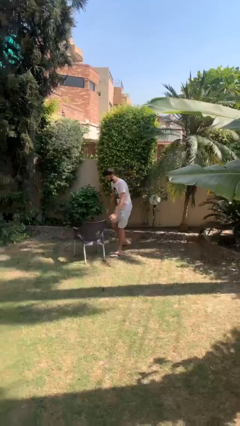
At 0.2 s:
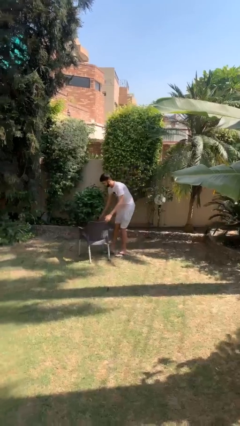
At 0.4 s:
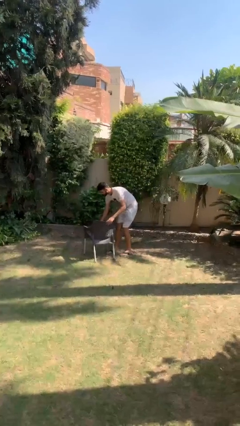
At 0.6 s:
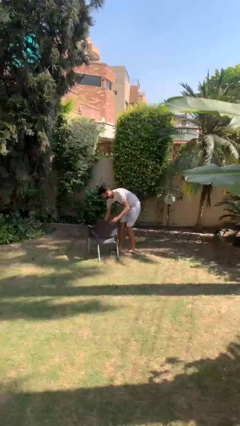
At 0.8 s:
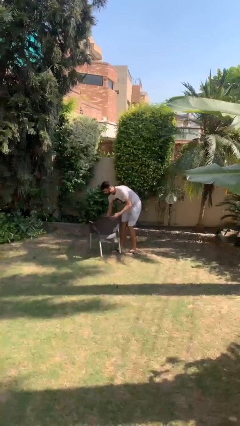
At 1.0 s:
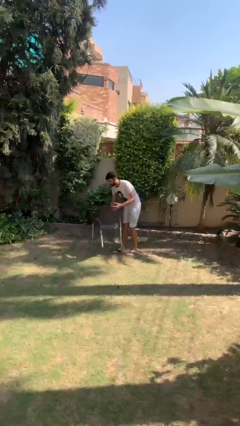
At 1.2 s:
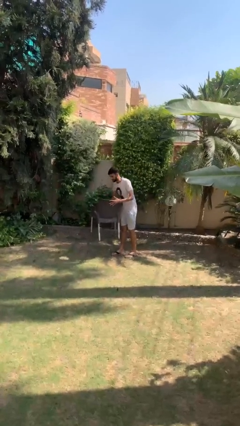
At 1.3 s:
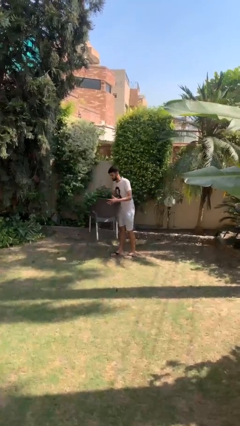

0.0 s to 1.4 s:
person picks up object from floor

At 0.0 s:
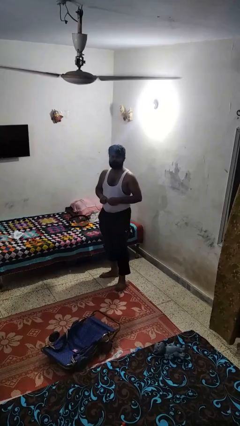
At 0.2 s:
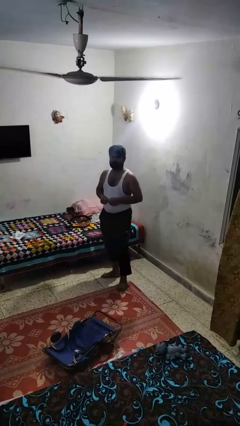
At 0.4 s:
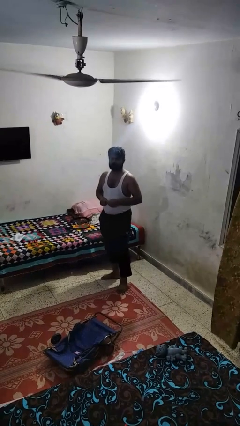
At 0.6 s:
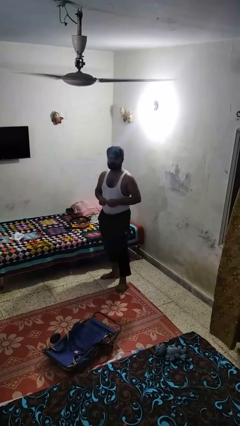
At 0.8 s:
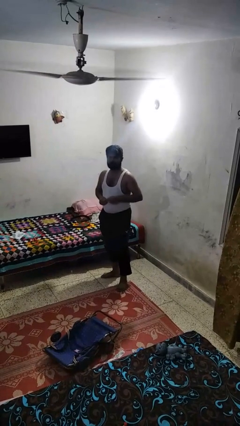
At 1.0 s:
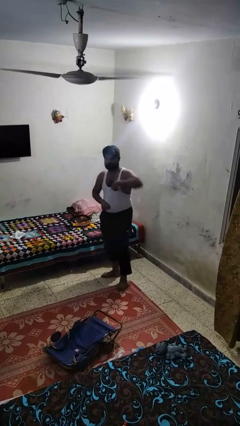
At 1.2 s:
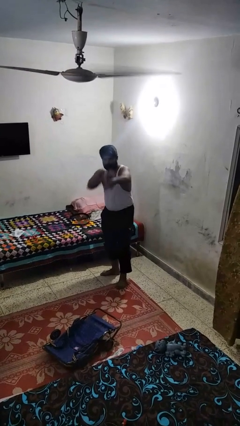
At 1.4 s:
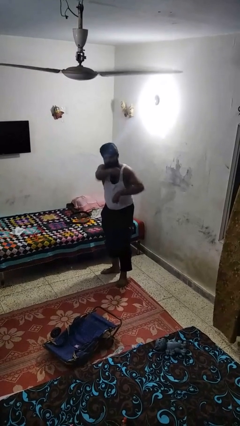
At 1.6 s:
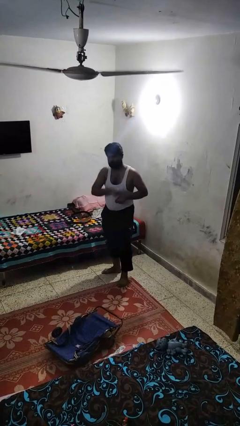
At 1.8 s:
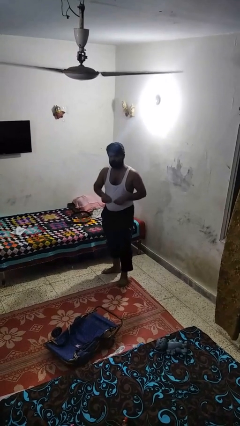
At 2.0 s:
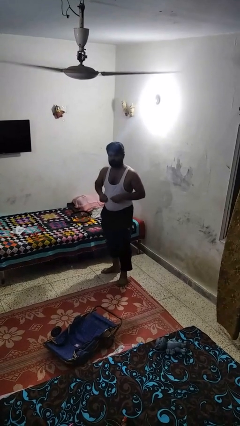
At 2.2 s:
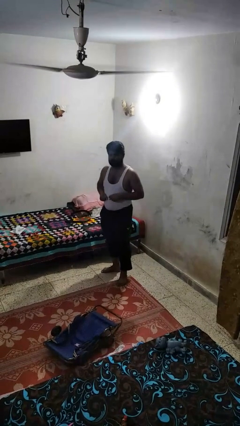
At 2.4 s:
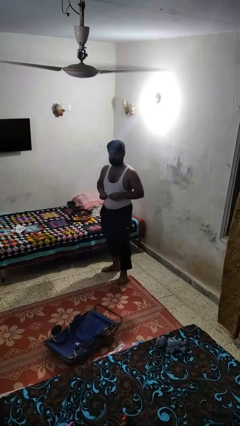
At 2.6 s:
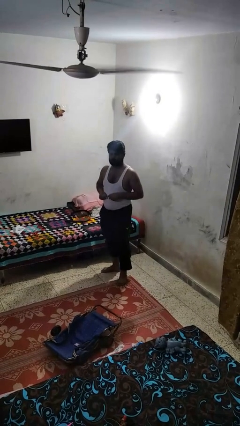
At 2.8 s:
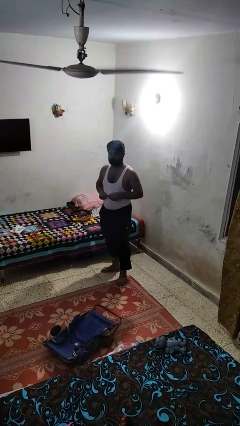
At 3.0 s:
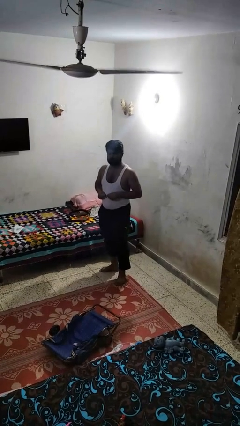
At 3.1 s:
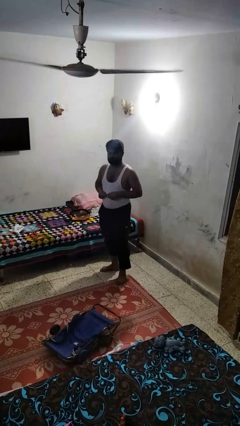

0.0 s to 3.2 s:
person karate chop

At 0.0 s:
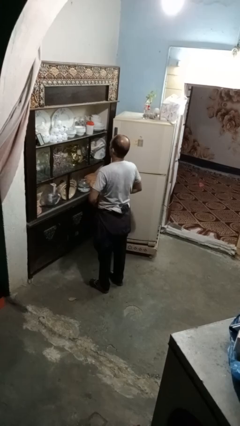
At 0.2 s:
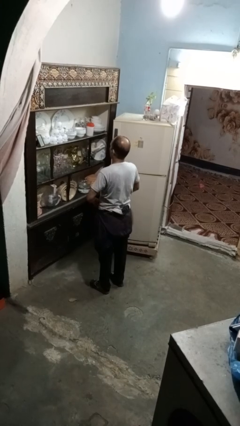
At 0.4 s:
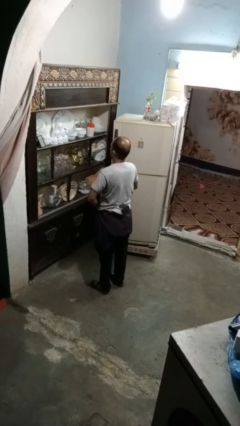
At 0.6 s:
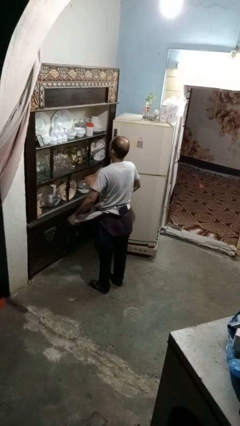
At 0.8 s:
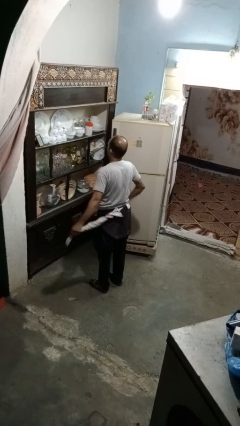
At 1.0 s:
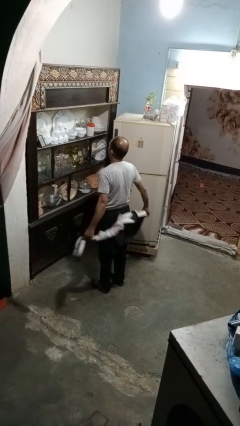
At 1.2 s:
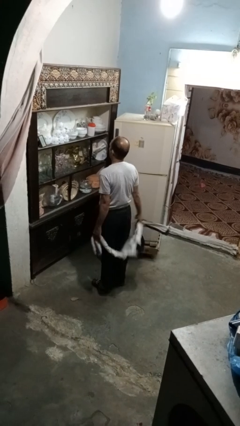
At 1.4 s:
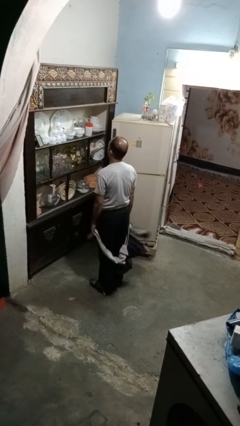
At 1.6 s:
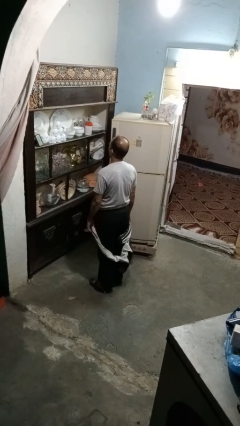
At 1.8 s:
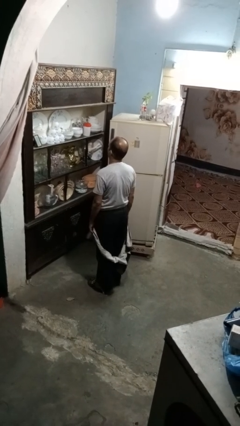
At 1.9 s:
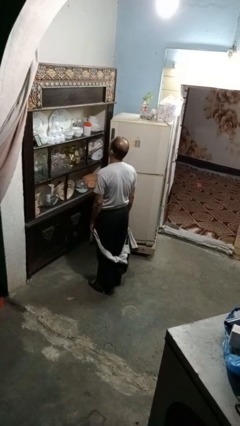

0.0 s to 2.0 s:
person unties jacket around waist

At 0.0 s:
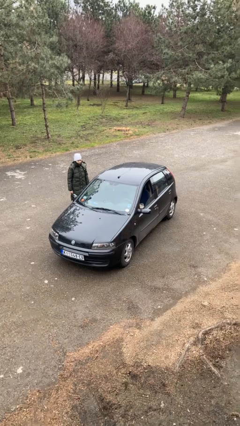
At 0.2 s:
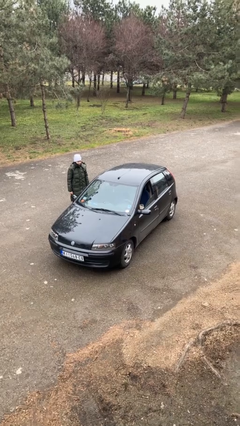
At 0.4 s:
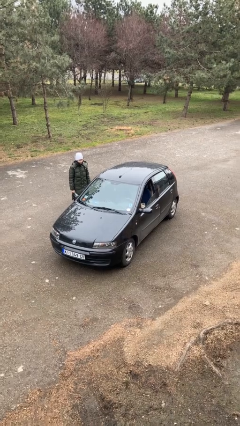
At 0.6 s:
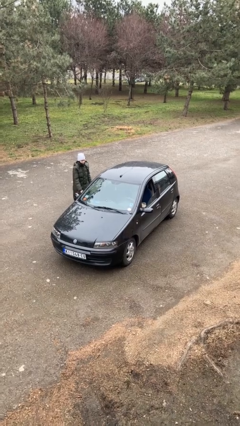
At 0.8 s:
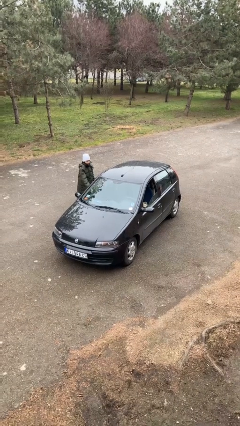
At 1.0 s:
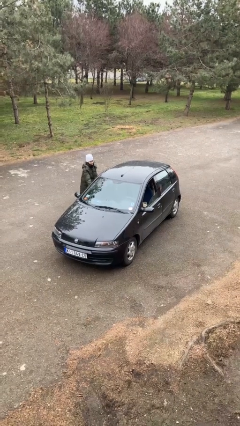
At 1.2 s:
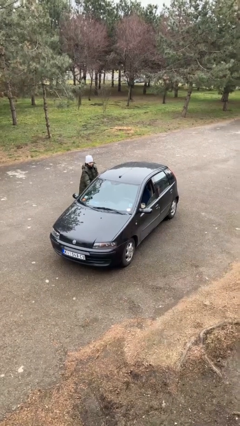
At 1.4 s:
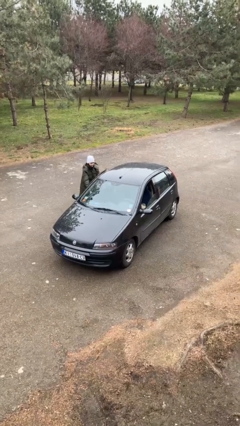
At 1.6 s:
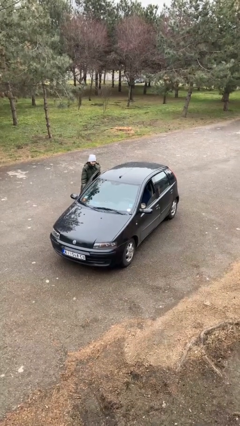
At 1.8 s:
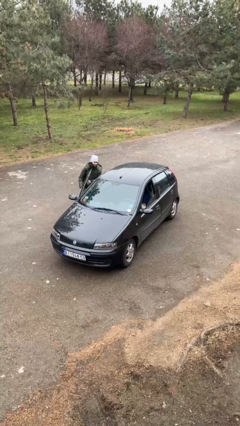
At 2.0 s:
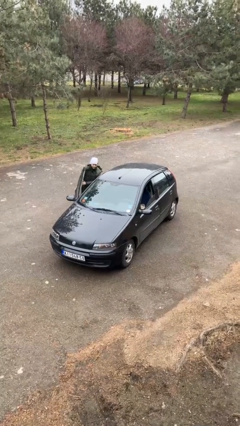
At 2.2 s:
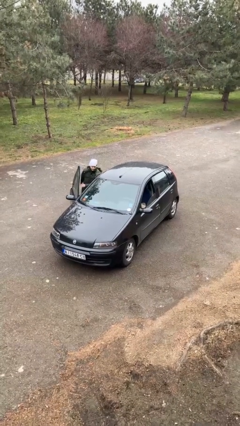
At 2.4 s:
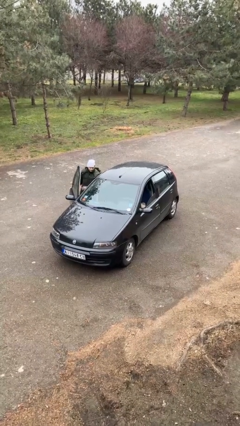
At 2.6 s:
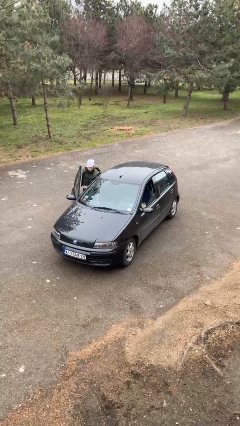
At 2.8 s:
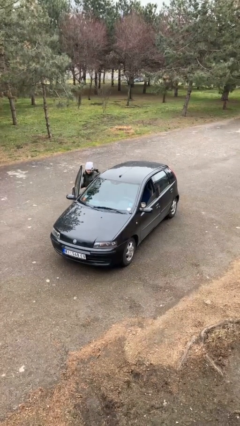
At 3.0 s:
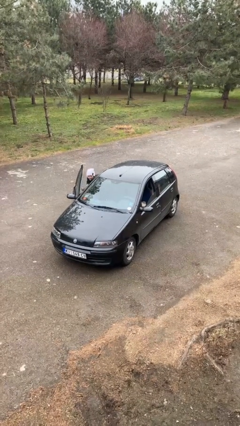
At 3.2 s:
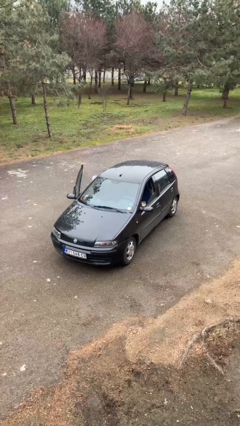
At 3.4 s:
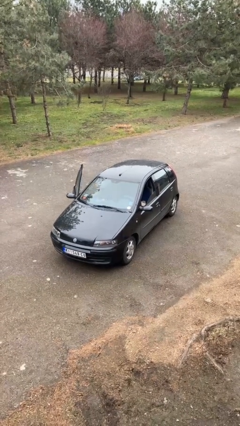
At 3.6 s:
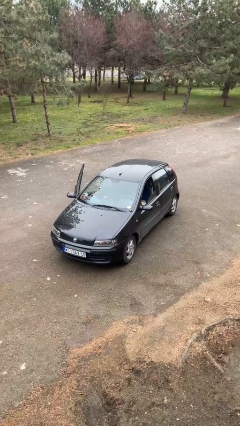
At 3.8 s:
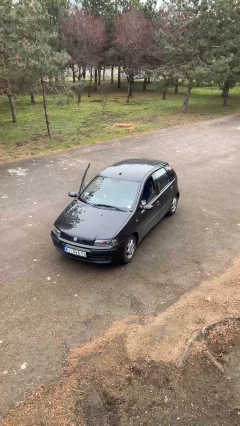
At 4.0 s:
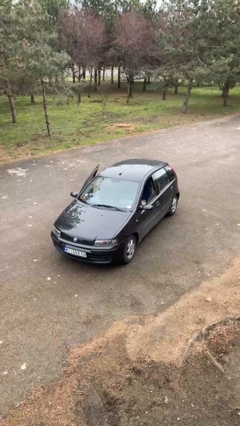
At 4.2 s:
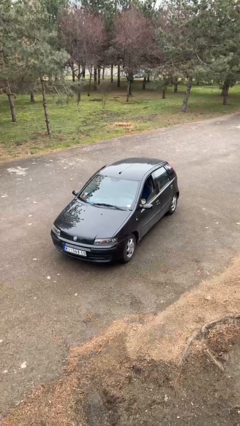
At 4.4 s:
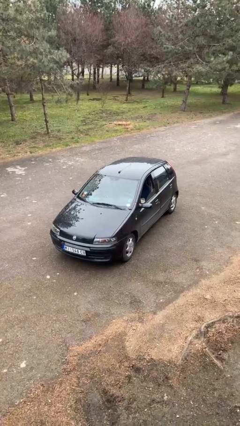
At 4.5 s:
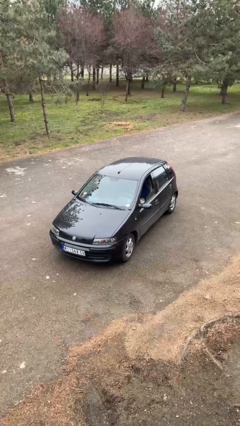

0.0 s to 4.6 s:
car picks up person

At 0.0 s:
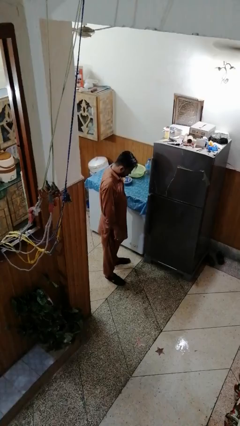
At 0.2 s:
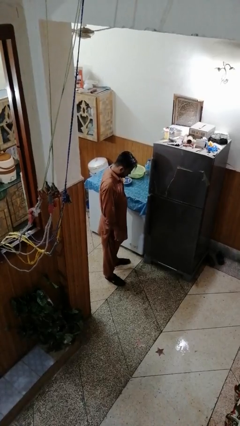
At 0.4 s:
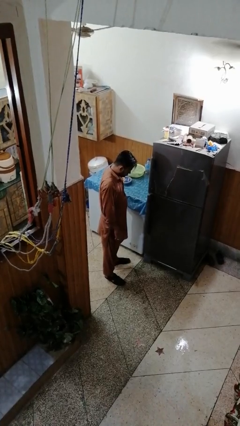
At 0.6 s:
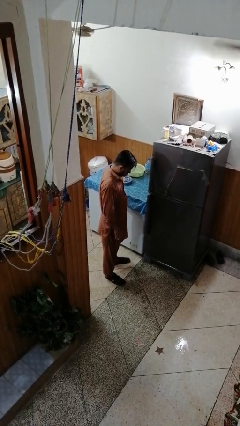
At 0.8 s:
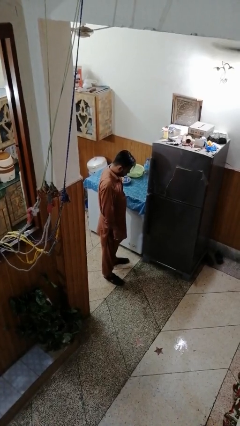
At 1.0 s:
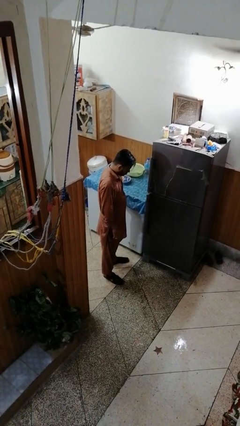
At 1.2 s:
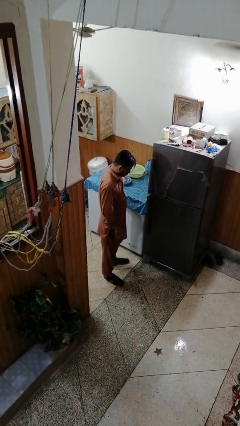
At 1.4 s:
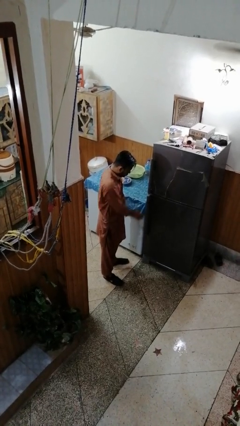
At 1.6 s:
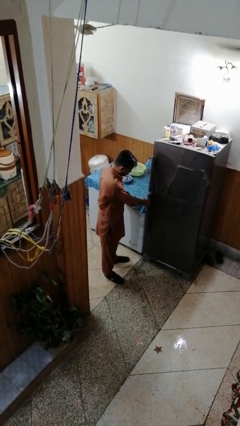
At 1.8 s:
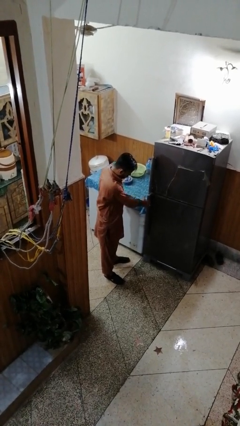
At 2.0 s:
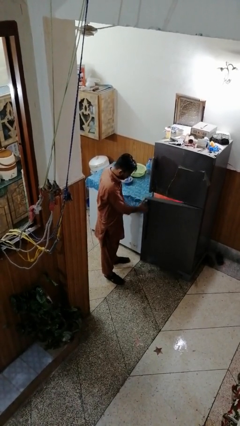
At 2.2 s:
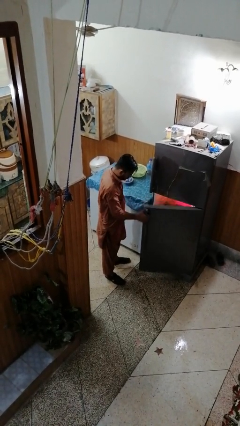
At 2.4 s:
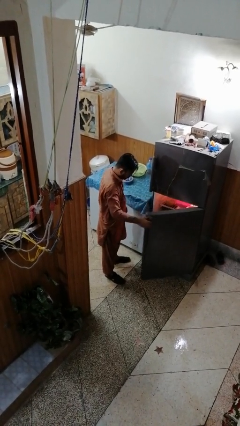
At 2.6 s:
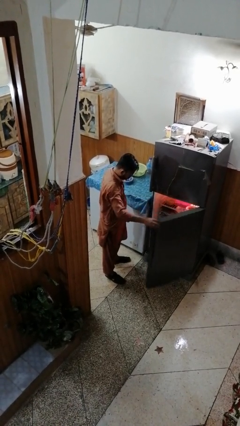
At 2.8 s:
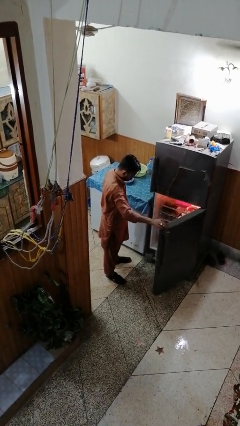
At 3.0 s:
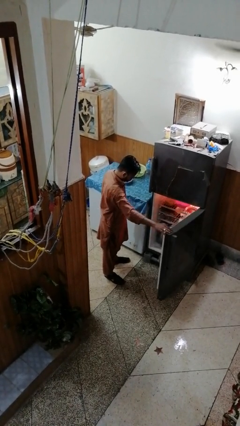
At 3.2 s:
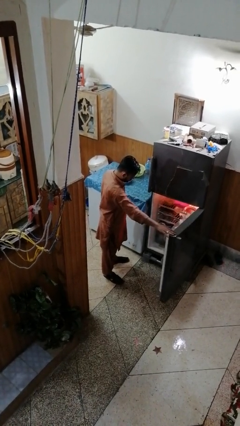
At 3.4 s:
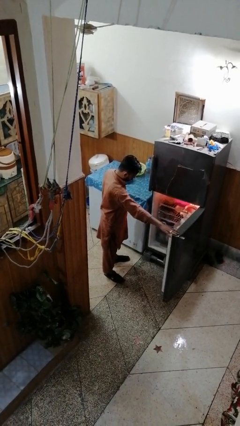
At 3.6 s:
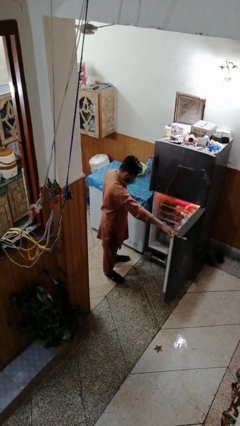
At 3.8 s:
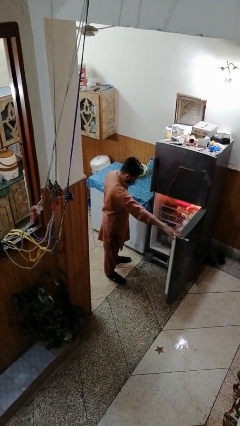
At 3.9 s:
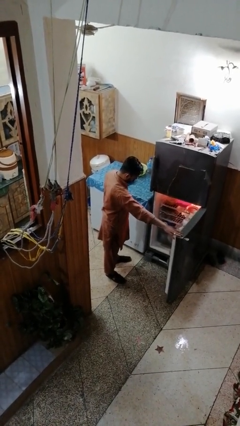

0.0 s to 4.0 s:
person opens refrigerator

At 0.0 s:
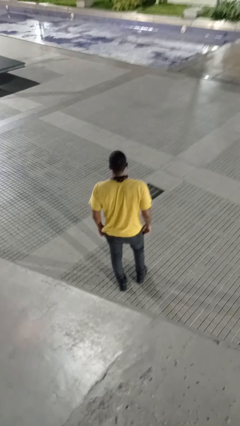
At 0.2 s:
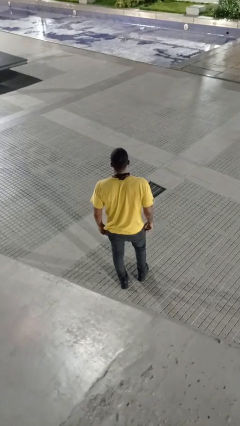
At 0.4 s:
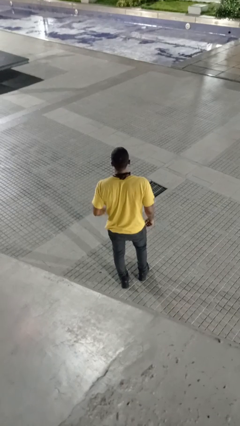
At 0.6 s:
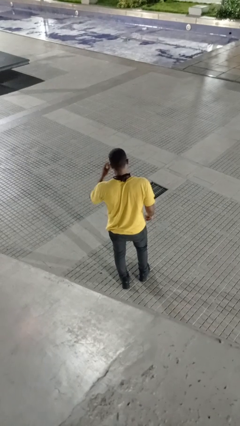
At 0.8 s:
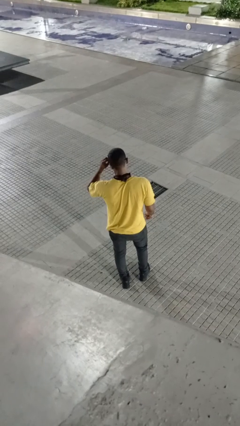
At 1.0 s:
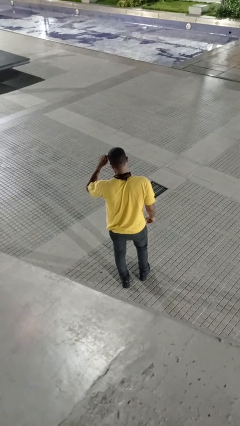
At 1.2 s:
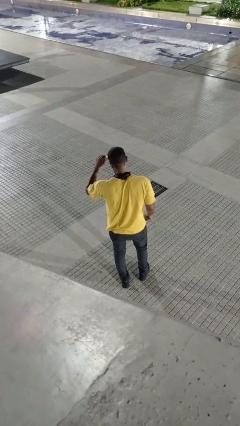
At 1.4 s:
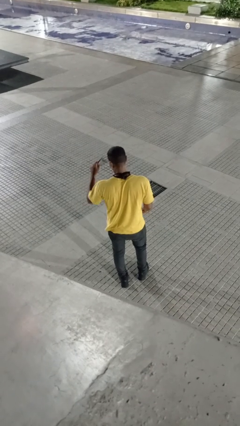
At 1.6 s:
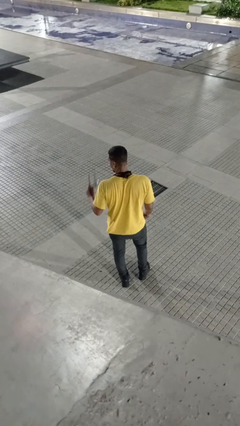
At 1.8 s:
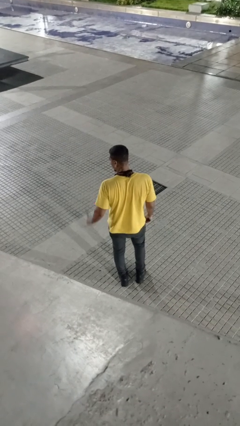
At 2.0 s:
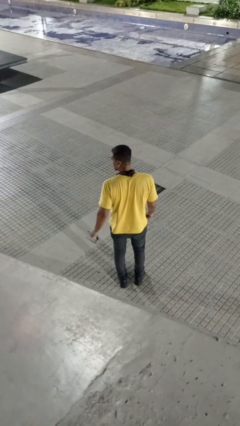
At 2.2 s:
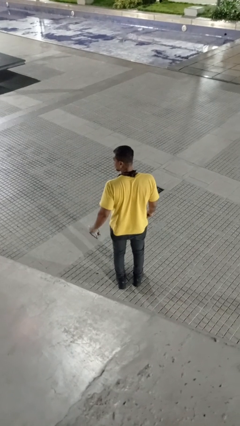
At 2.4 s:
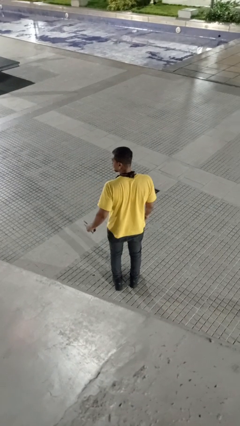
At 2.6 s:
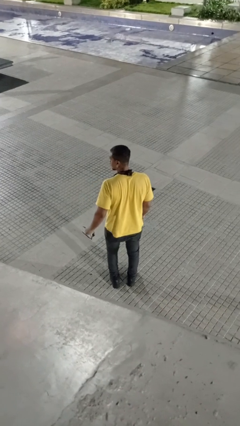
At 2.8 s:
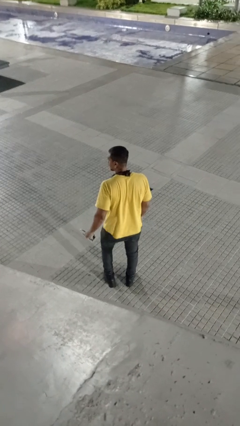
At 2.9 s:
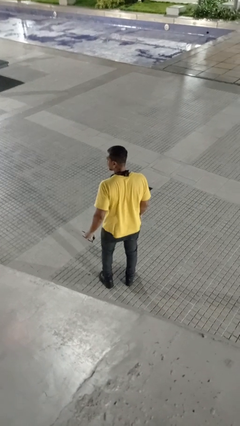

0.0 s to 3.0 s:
person takes off glasses
